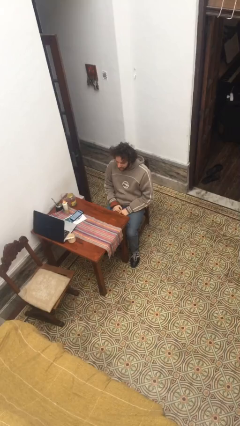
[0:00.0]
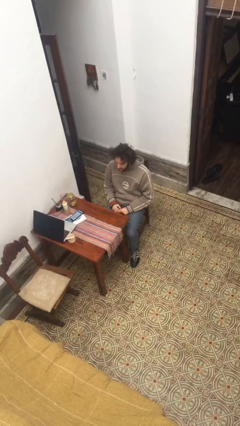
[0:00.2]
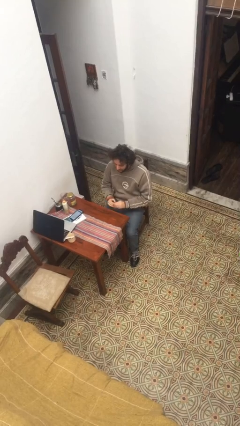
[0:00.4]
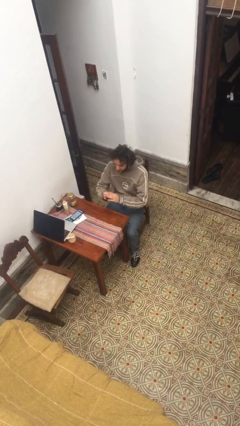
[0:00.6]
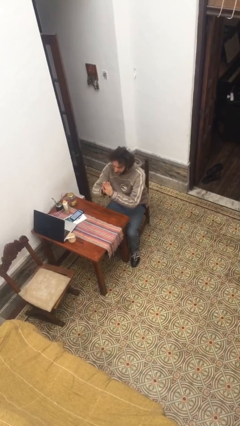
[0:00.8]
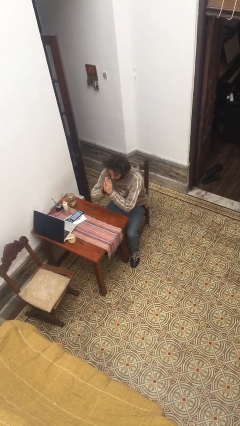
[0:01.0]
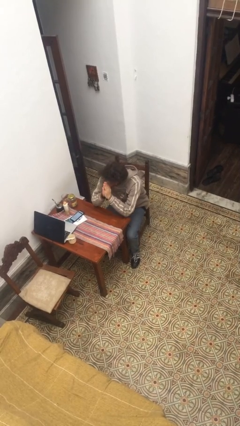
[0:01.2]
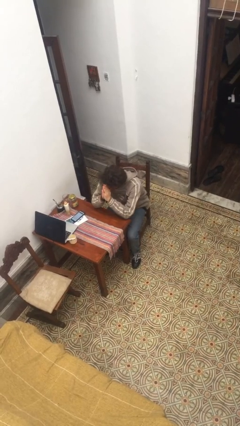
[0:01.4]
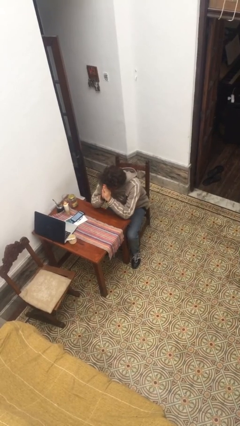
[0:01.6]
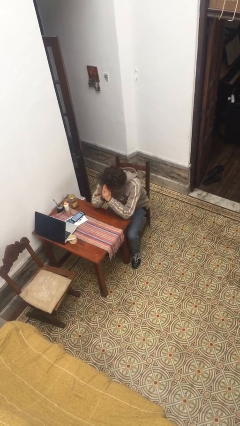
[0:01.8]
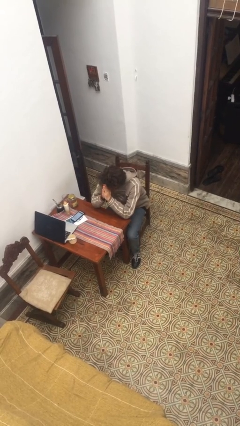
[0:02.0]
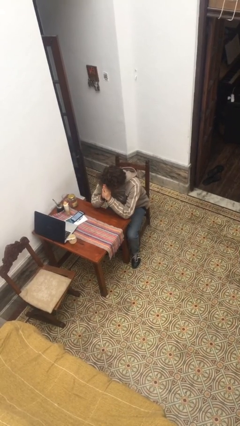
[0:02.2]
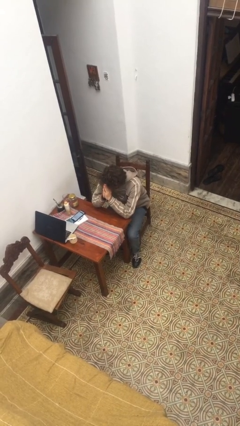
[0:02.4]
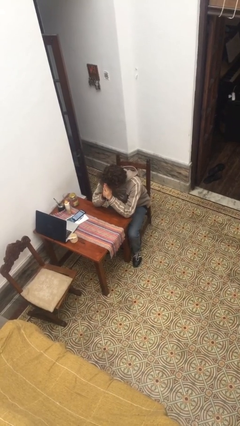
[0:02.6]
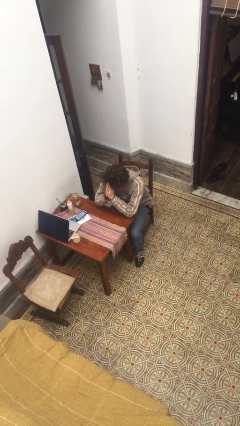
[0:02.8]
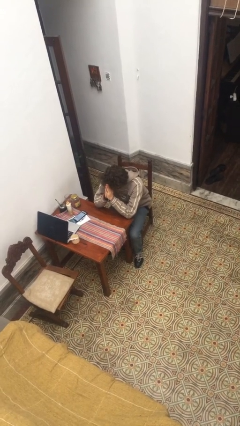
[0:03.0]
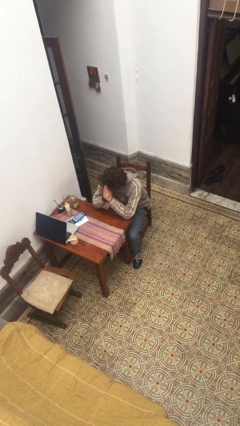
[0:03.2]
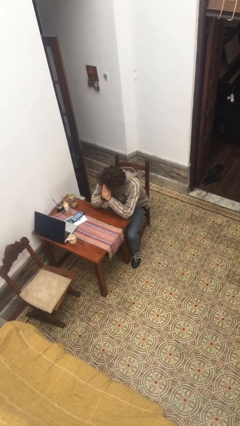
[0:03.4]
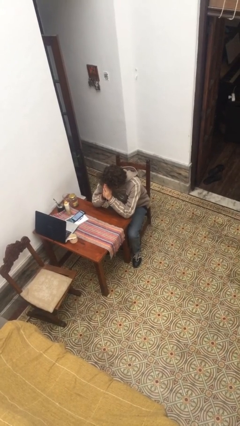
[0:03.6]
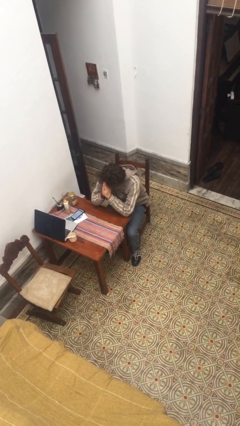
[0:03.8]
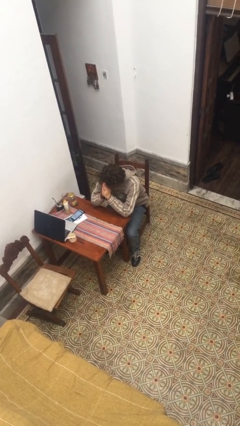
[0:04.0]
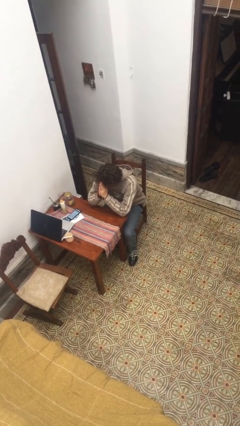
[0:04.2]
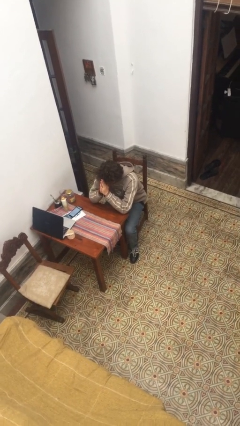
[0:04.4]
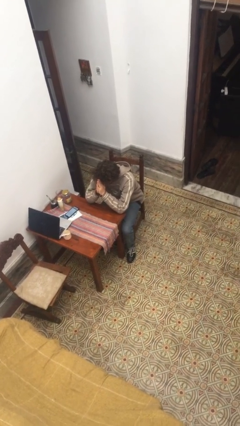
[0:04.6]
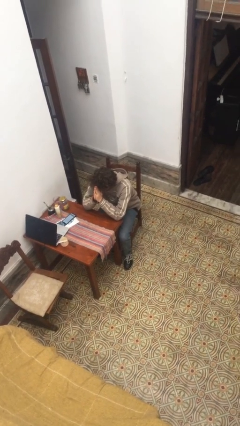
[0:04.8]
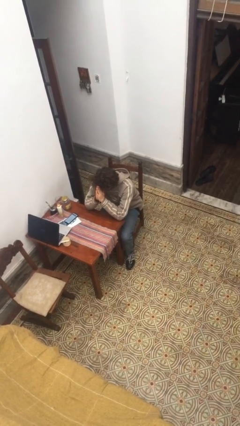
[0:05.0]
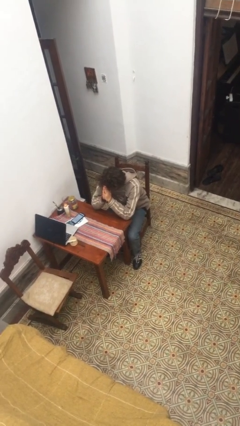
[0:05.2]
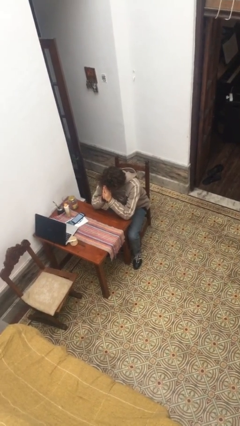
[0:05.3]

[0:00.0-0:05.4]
person prays

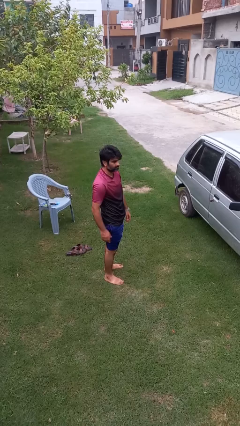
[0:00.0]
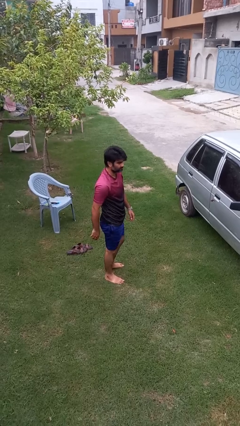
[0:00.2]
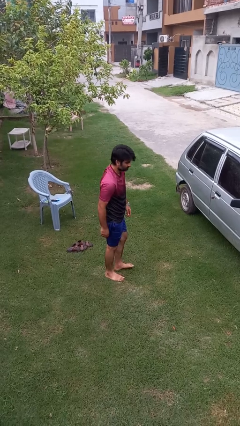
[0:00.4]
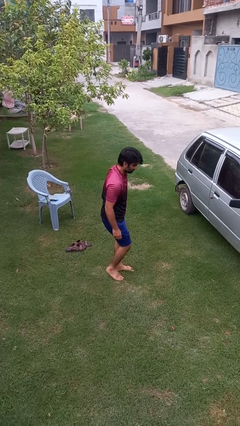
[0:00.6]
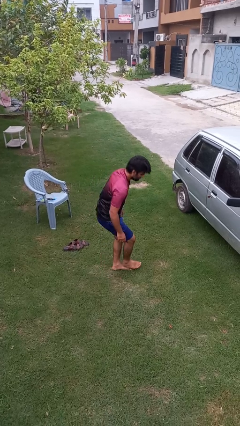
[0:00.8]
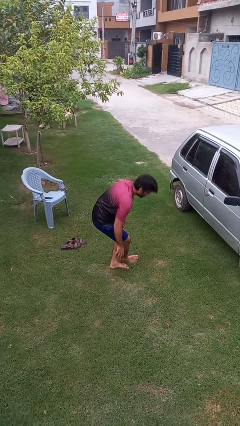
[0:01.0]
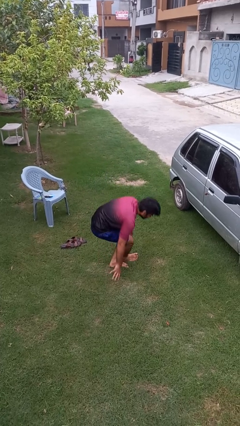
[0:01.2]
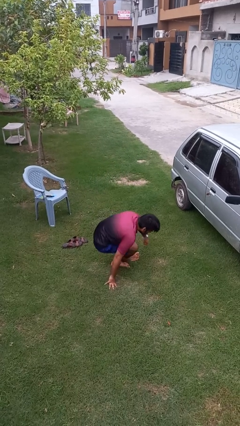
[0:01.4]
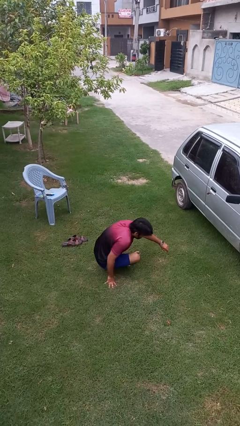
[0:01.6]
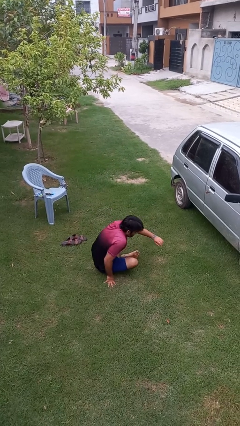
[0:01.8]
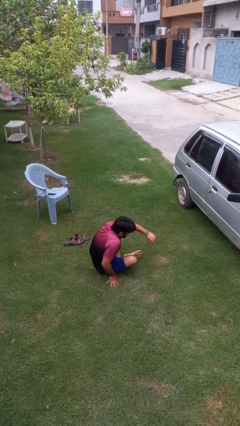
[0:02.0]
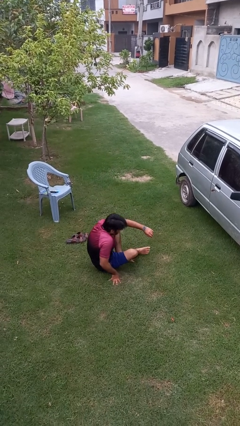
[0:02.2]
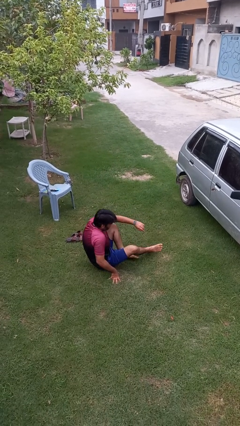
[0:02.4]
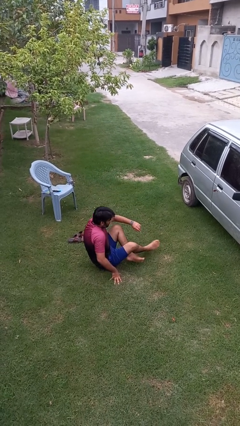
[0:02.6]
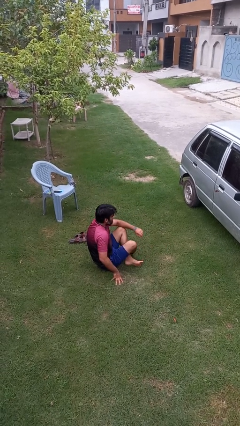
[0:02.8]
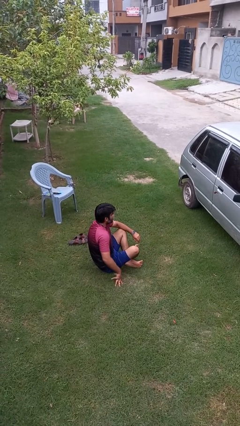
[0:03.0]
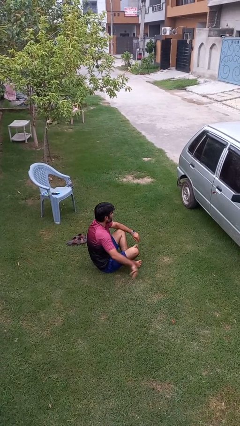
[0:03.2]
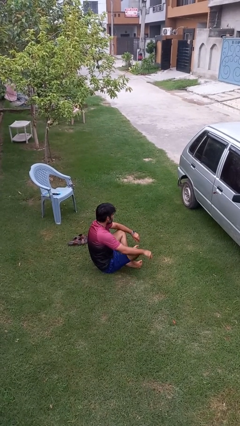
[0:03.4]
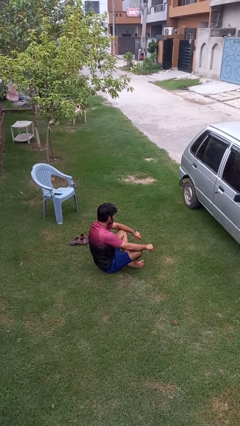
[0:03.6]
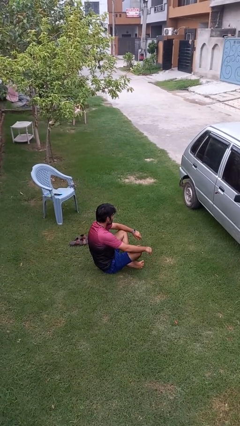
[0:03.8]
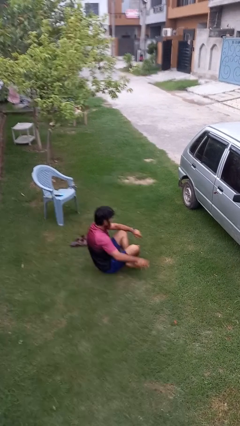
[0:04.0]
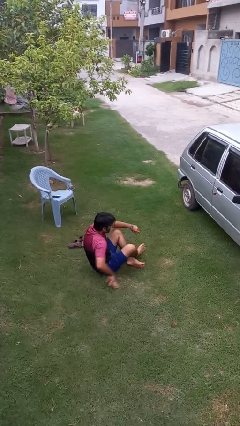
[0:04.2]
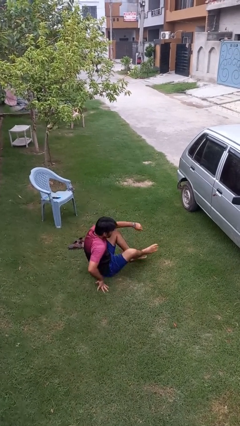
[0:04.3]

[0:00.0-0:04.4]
person sits crisscross

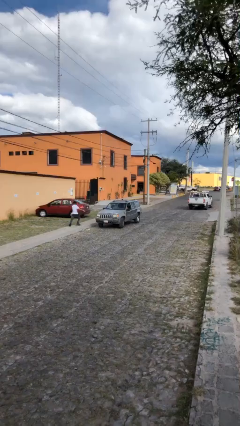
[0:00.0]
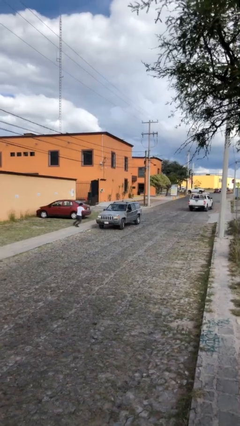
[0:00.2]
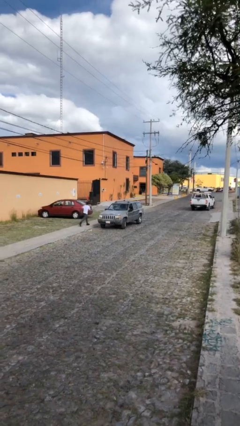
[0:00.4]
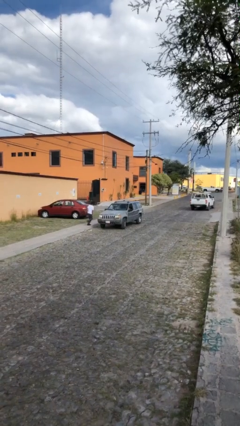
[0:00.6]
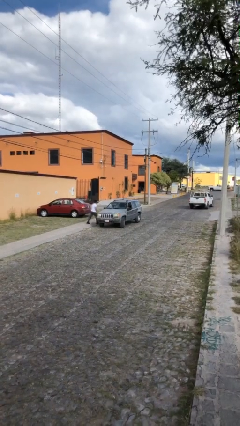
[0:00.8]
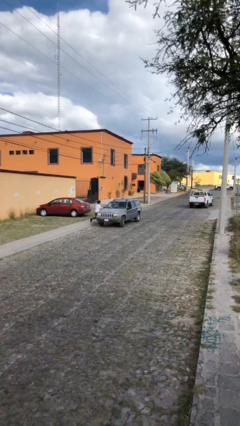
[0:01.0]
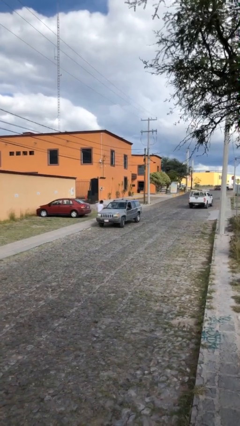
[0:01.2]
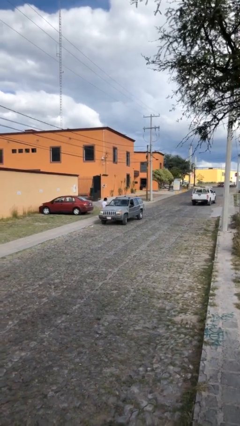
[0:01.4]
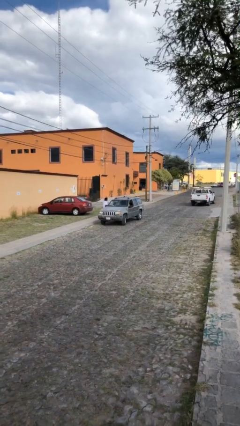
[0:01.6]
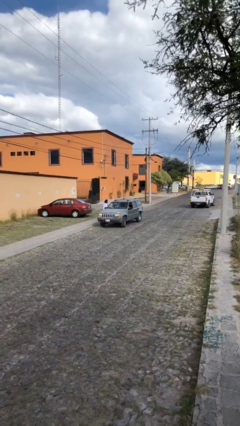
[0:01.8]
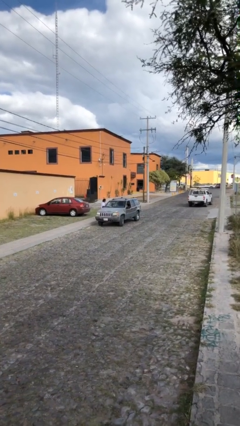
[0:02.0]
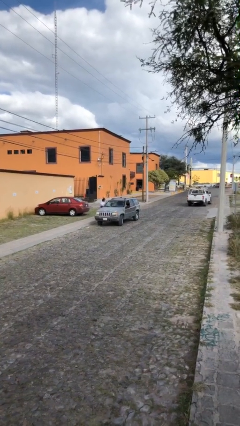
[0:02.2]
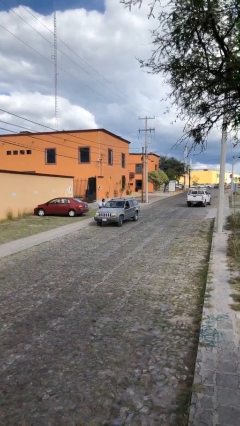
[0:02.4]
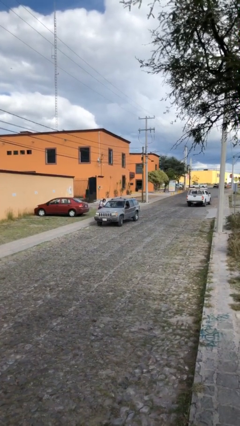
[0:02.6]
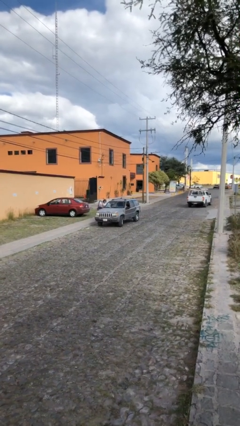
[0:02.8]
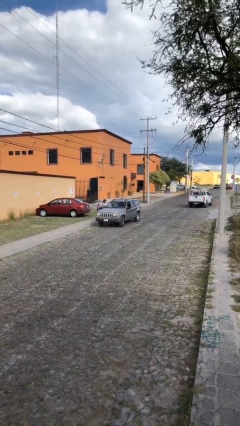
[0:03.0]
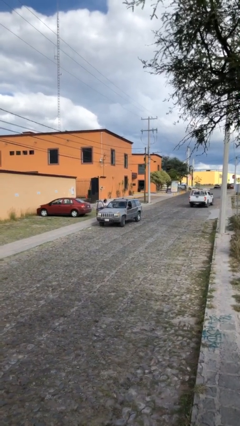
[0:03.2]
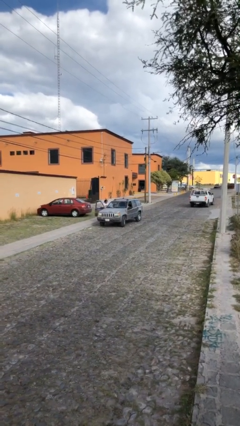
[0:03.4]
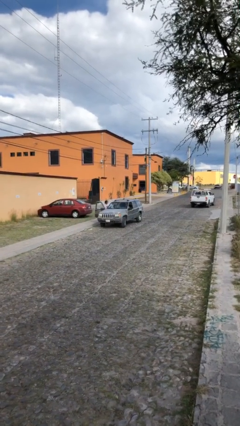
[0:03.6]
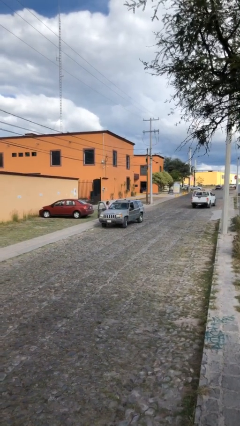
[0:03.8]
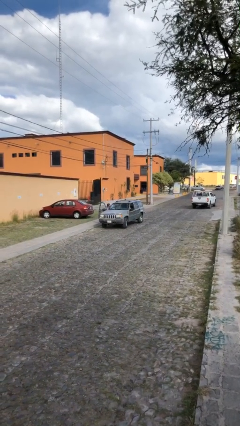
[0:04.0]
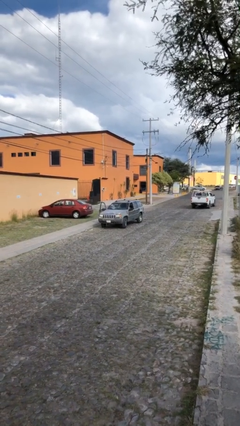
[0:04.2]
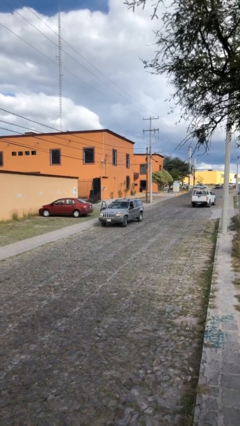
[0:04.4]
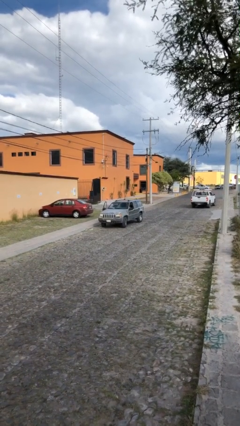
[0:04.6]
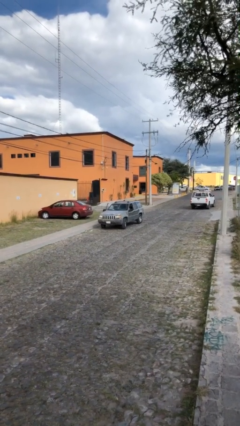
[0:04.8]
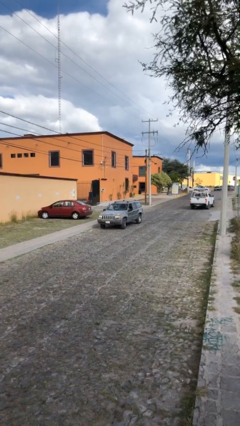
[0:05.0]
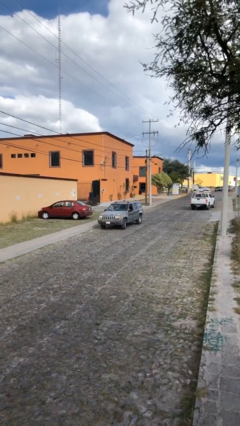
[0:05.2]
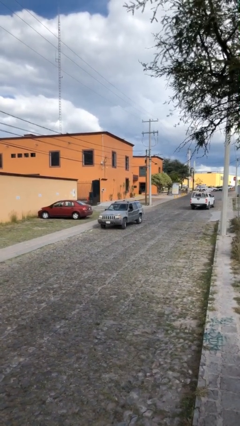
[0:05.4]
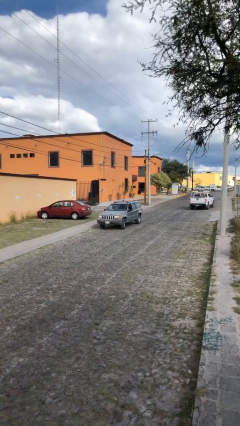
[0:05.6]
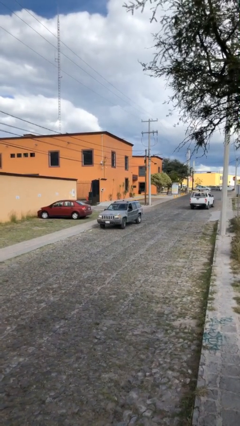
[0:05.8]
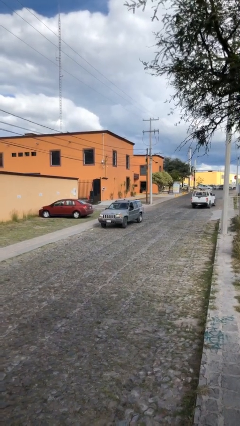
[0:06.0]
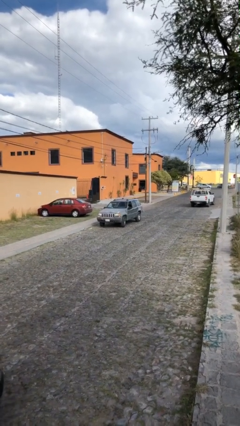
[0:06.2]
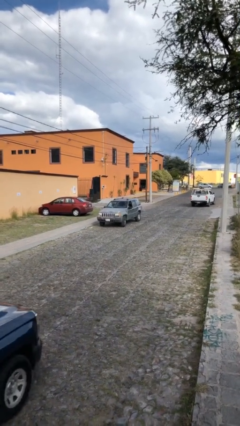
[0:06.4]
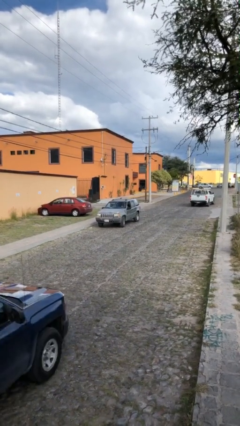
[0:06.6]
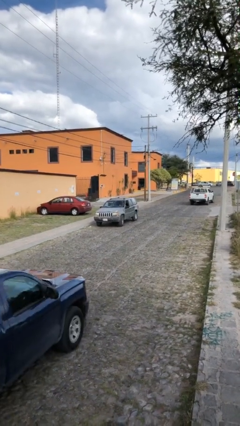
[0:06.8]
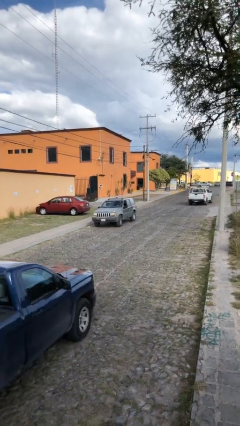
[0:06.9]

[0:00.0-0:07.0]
car picks up person
